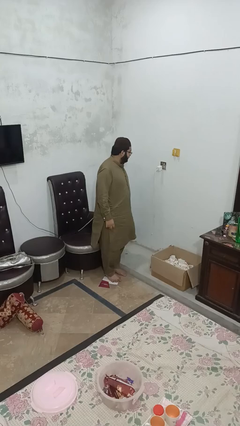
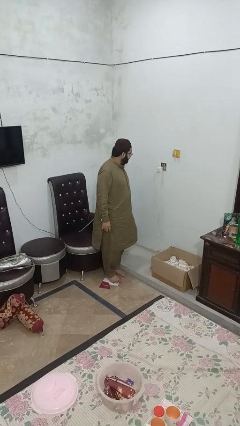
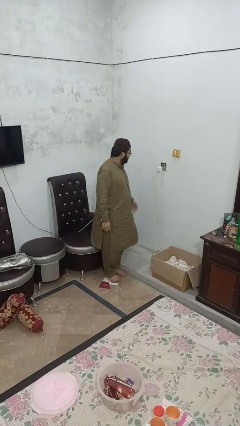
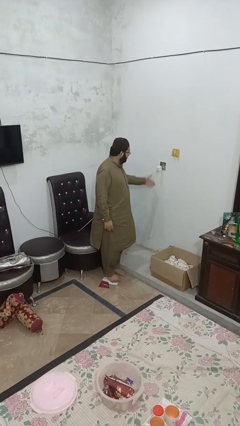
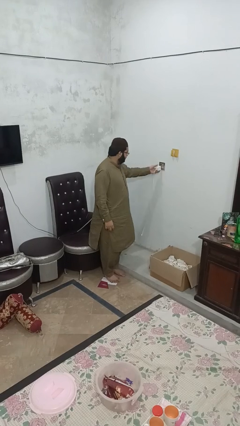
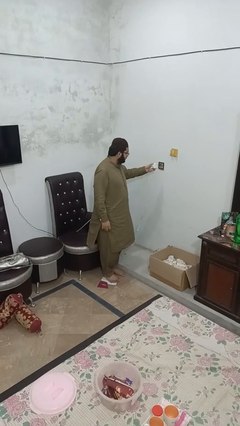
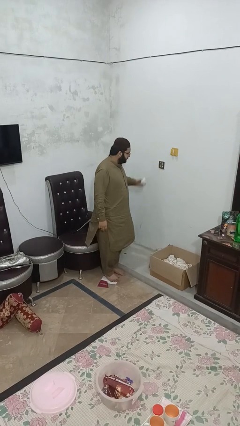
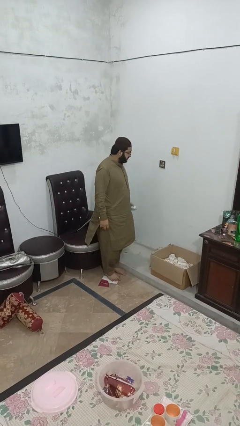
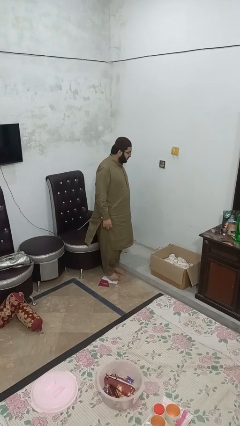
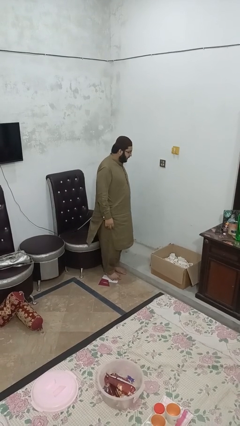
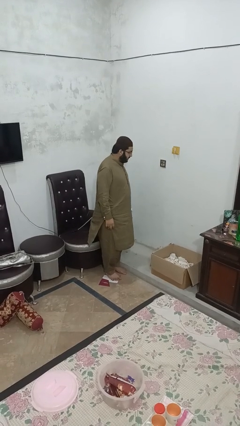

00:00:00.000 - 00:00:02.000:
person unplugs from electrical socket

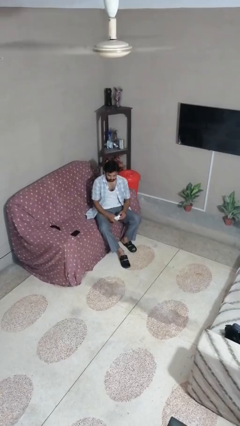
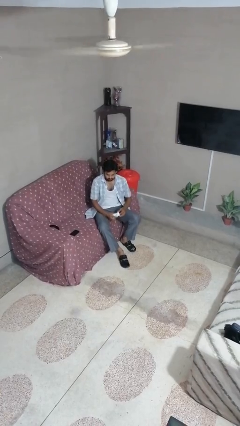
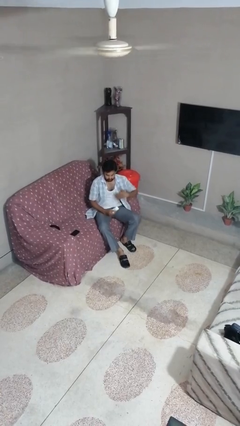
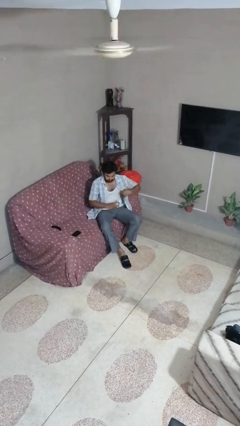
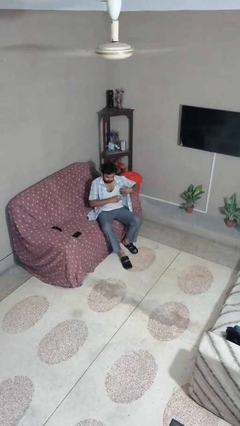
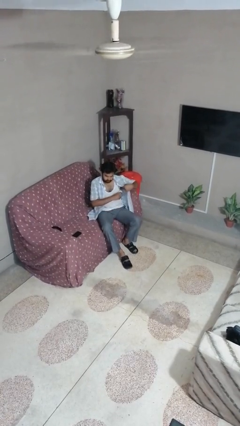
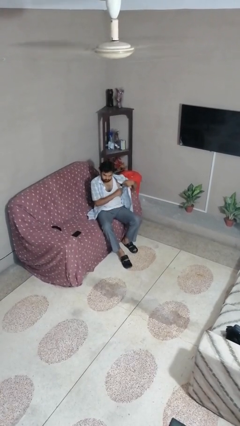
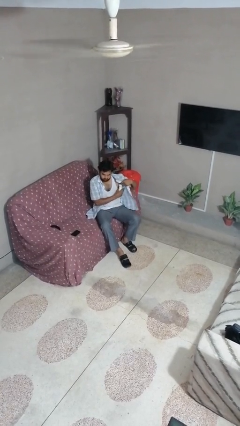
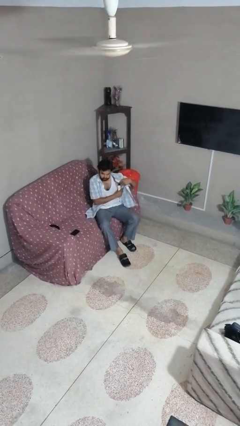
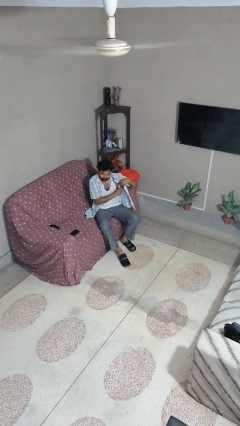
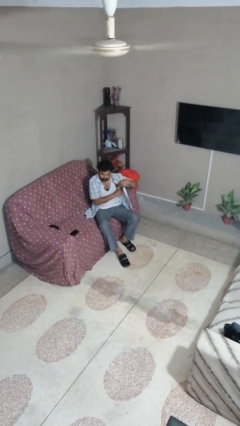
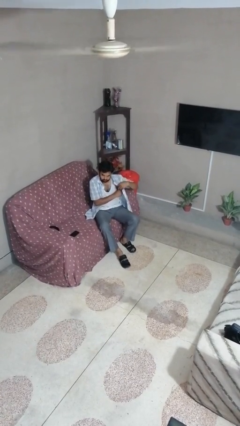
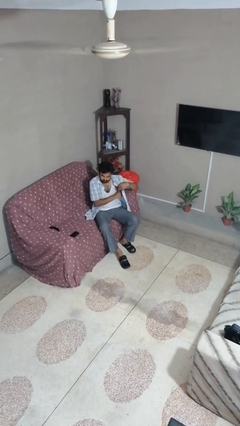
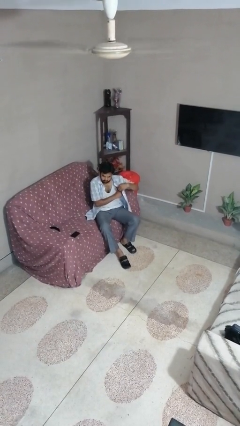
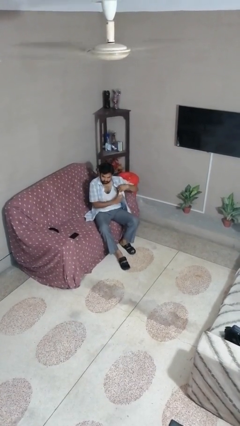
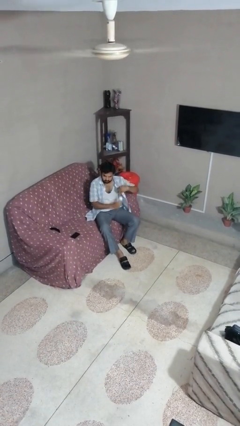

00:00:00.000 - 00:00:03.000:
person applies deodorant

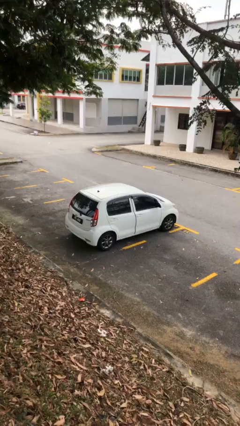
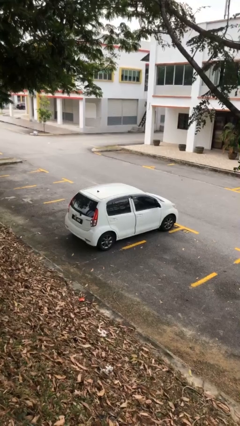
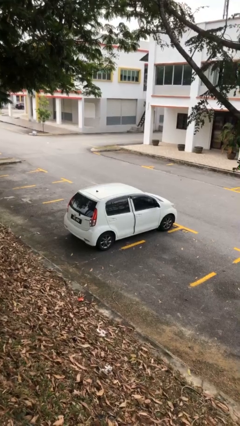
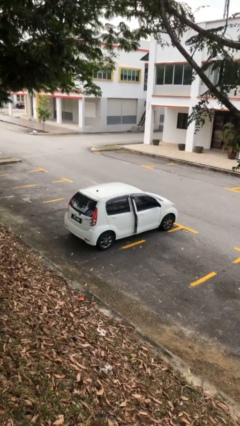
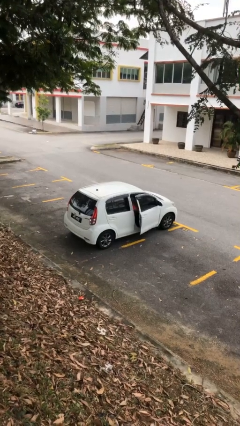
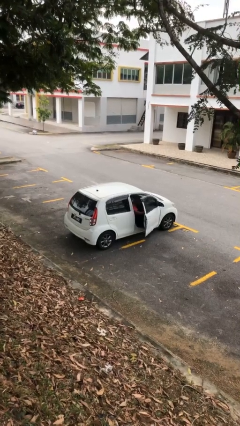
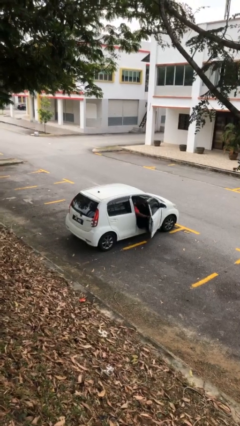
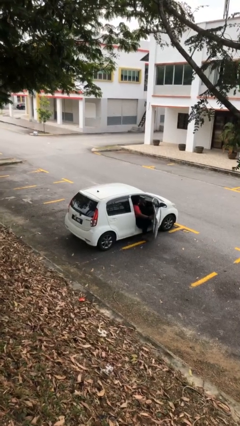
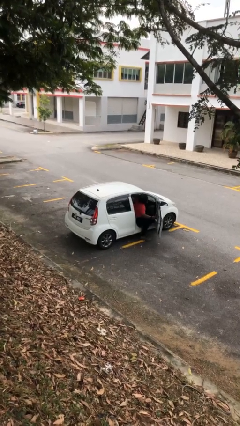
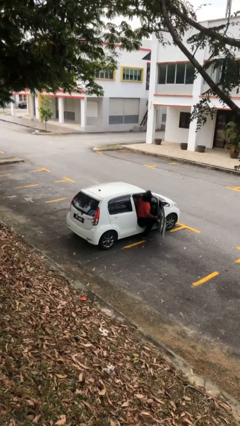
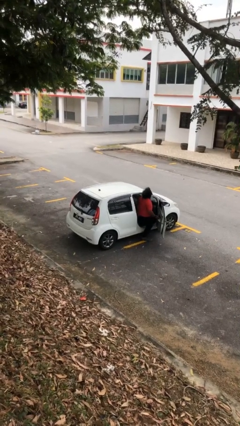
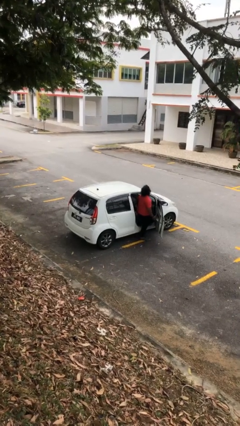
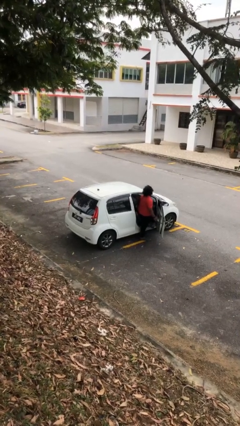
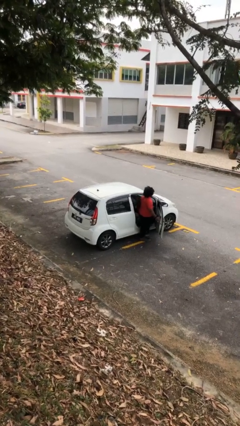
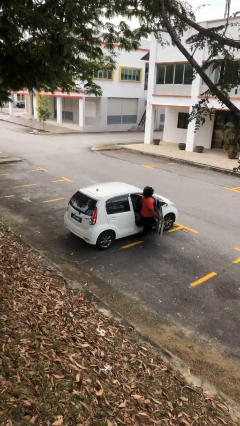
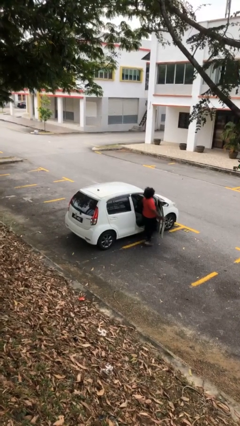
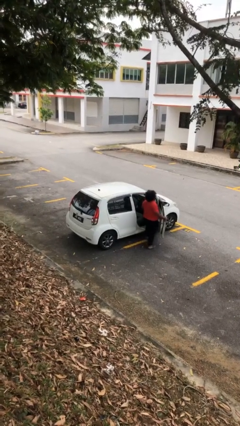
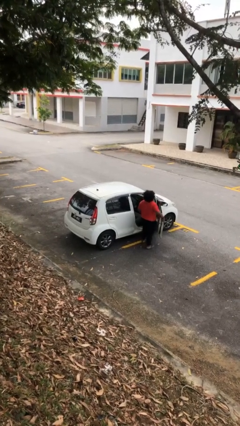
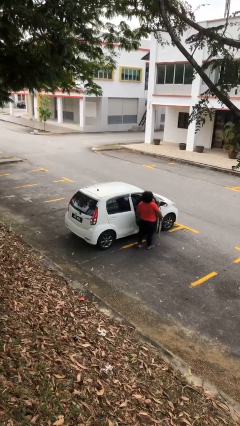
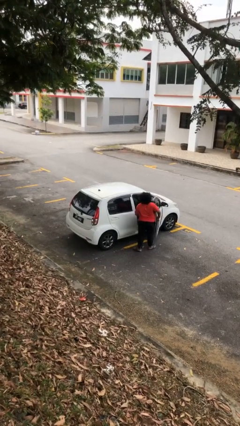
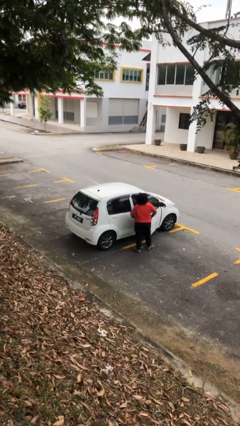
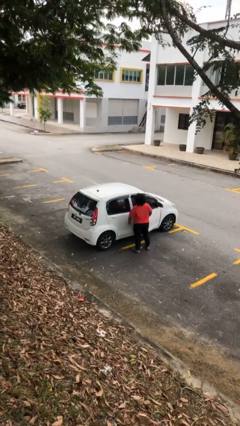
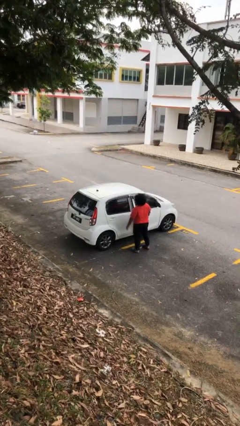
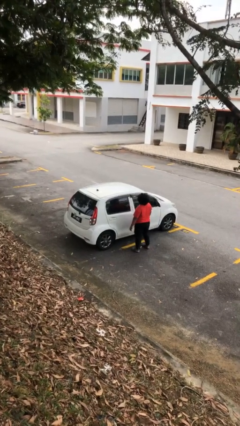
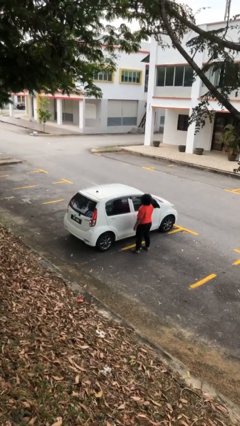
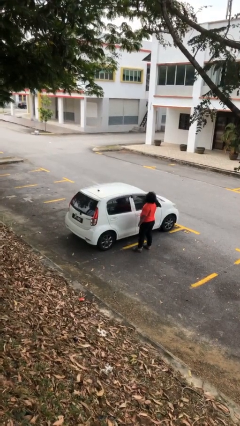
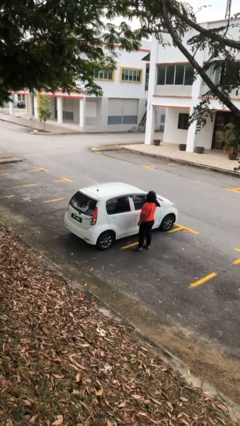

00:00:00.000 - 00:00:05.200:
car drops off person

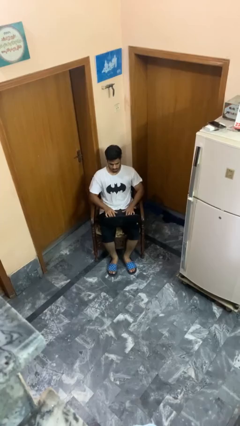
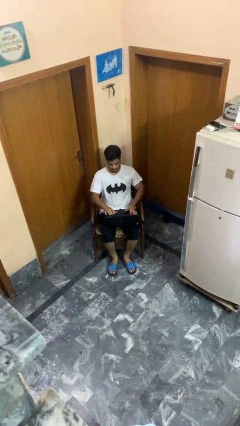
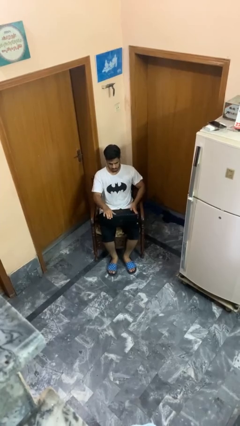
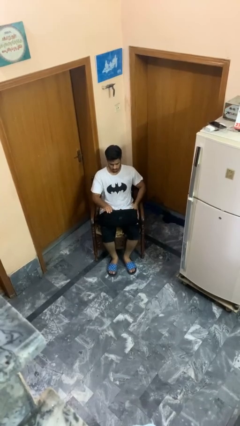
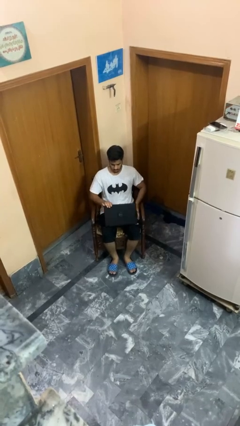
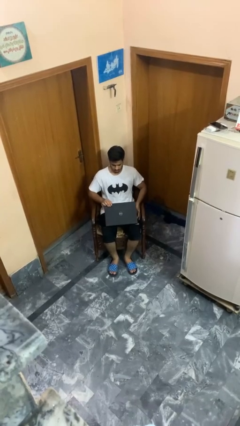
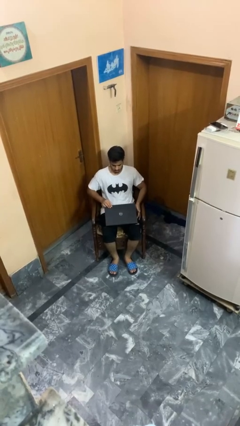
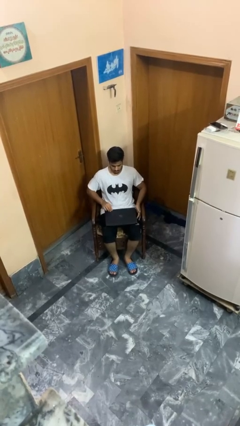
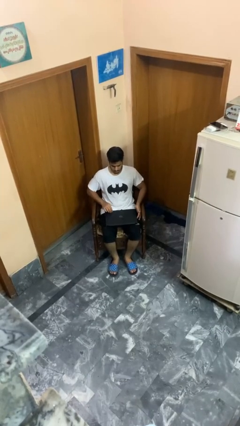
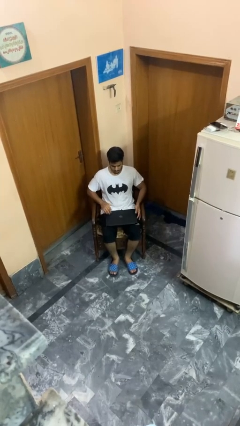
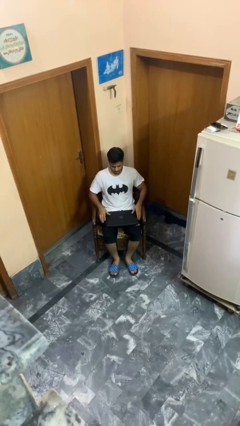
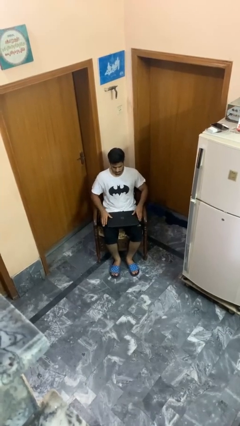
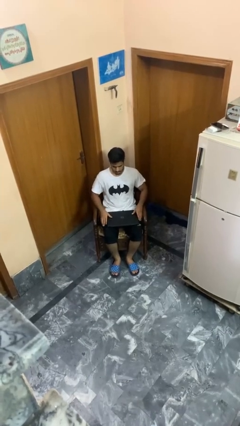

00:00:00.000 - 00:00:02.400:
person closes laptop

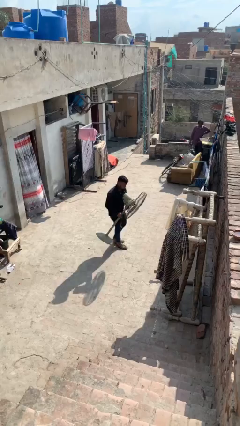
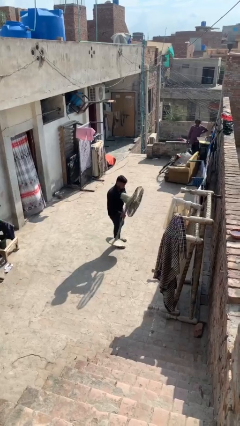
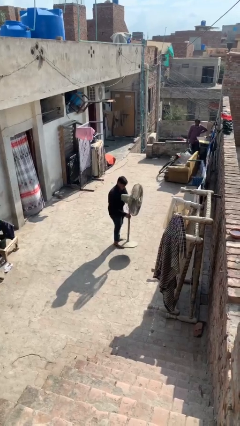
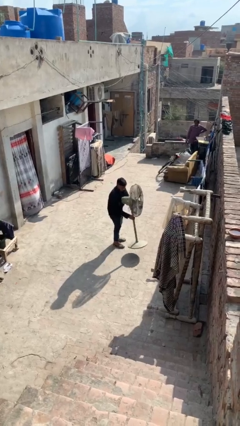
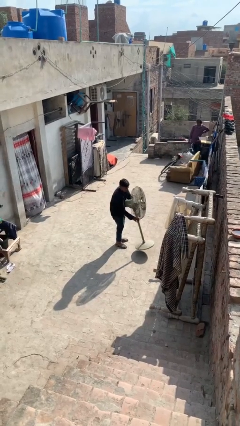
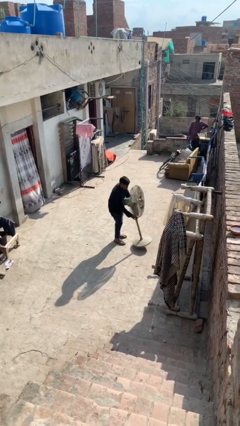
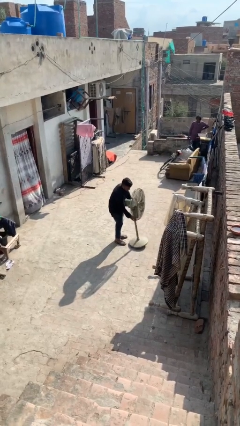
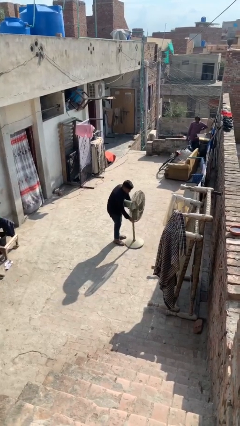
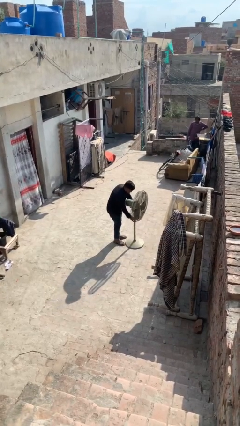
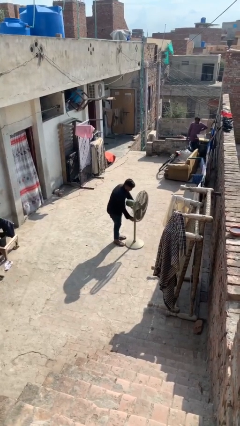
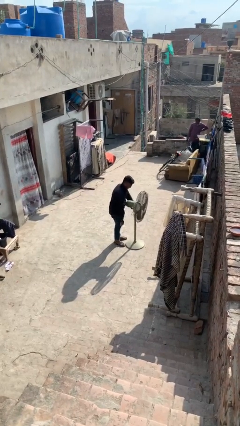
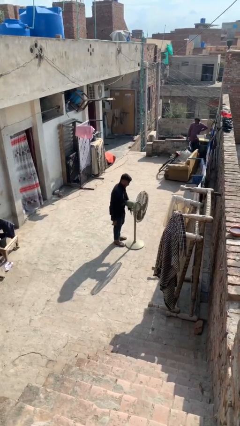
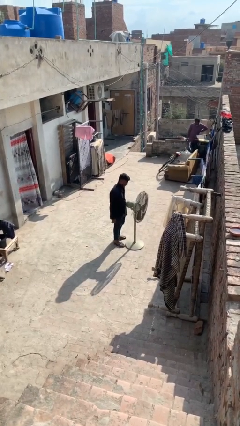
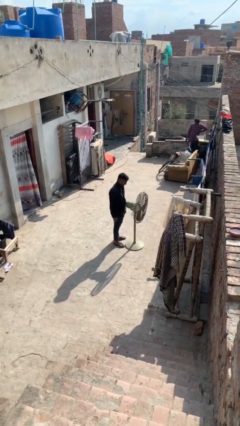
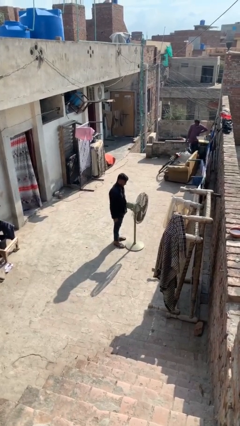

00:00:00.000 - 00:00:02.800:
person puts down object on floor

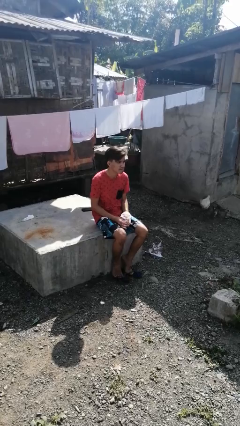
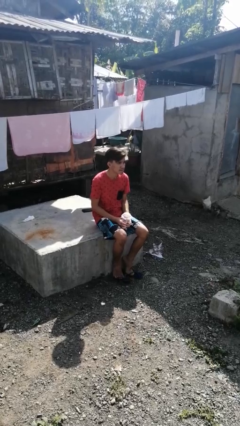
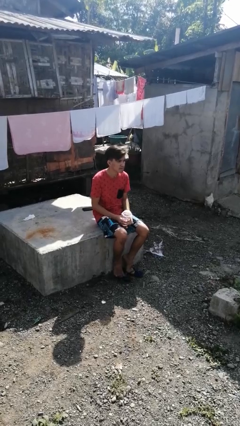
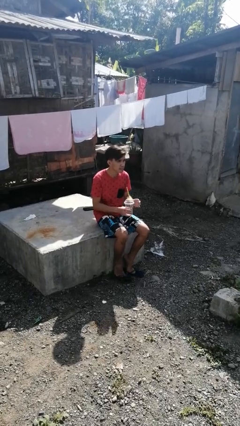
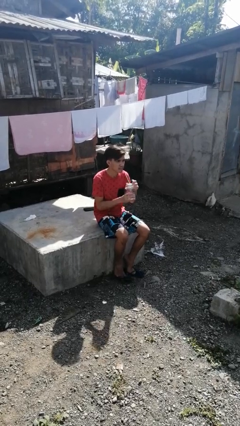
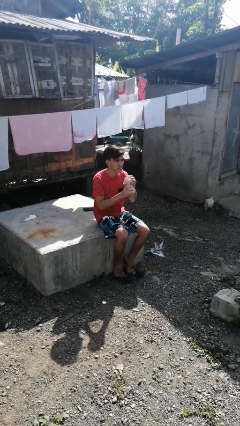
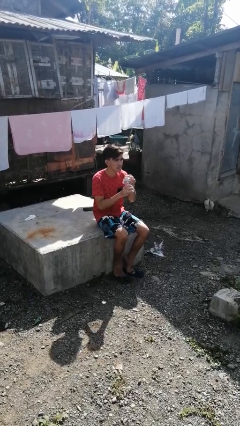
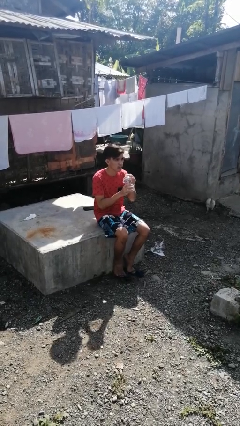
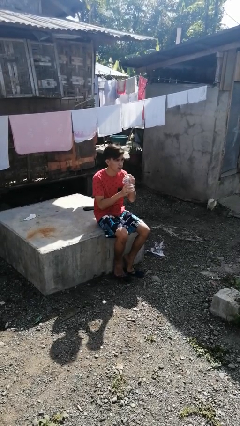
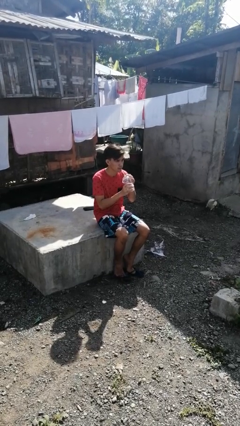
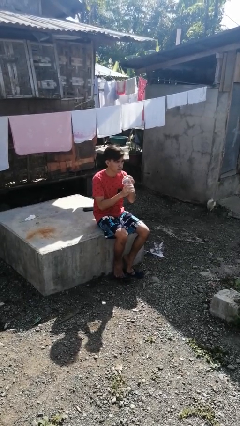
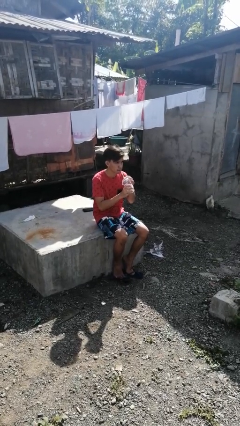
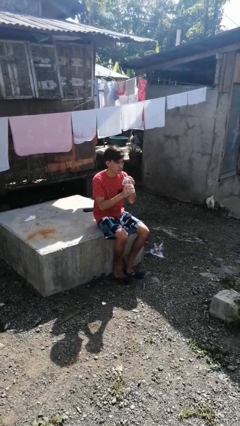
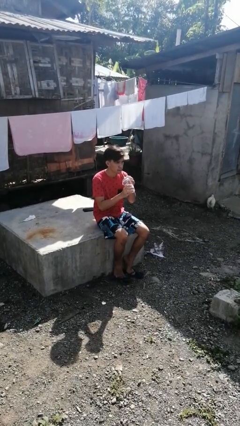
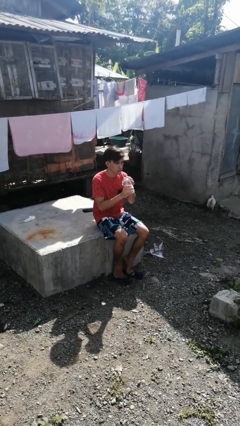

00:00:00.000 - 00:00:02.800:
person drinks from straw
